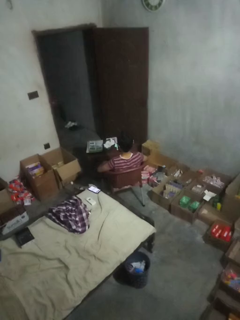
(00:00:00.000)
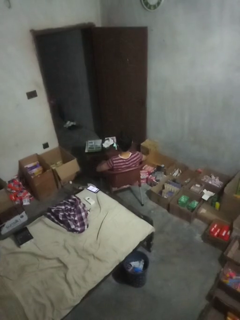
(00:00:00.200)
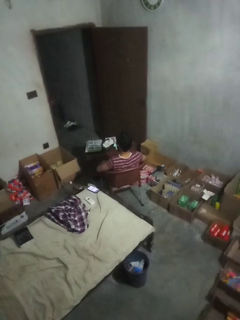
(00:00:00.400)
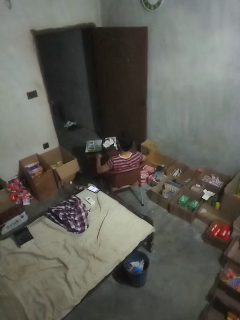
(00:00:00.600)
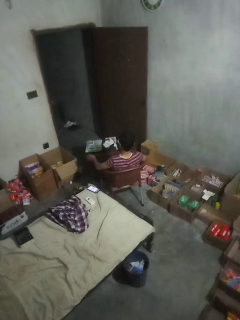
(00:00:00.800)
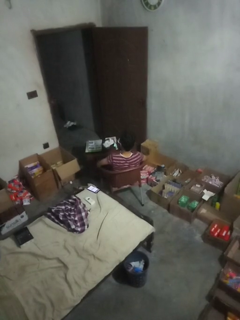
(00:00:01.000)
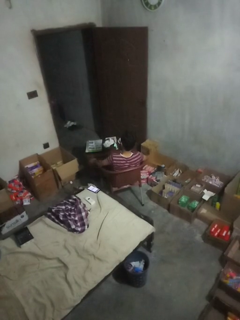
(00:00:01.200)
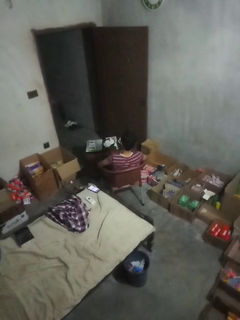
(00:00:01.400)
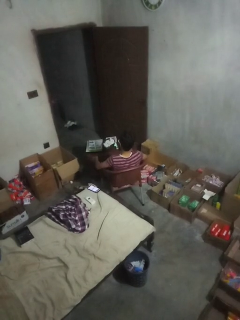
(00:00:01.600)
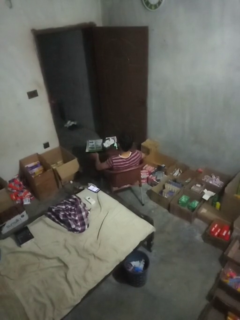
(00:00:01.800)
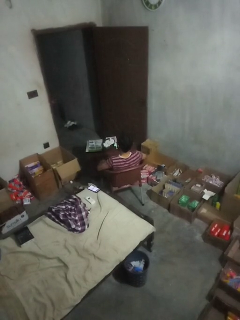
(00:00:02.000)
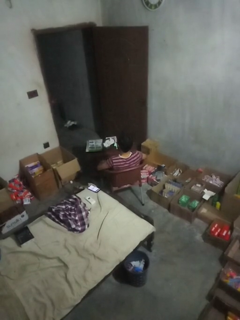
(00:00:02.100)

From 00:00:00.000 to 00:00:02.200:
person slaps hands on thighs

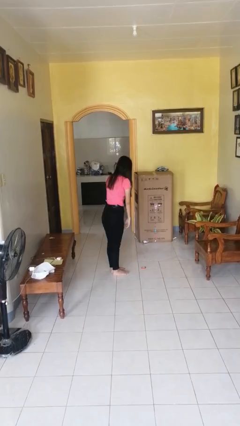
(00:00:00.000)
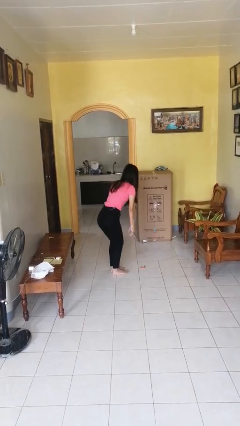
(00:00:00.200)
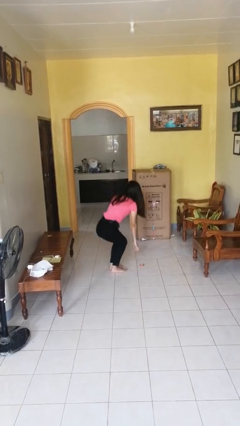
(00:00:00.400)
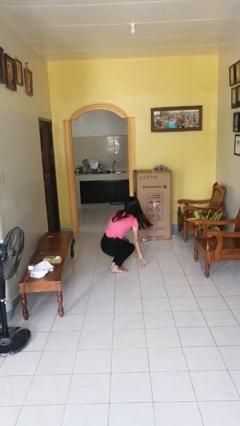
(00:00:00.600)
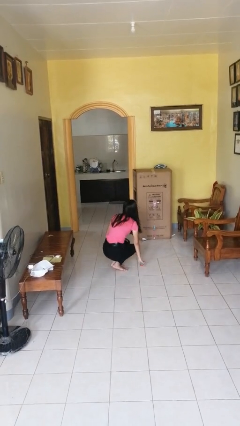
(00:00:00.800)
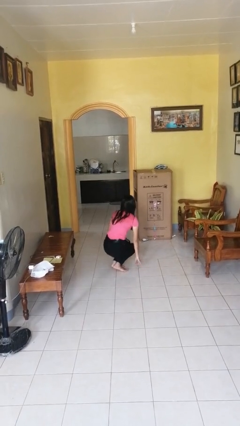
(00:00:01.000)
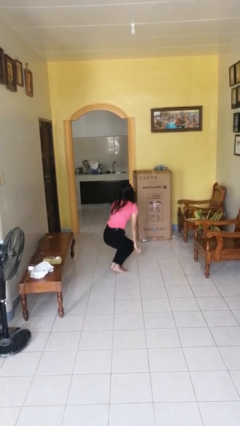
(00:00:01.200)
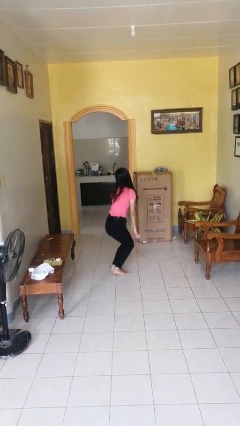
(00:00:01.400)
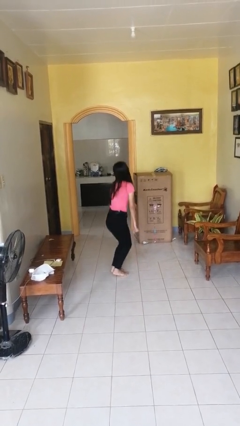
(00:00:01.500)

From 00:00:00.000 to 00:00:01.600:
person picks up object from floor

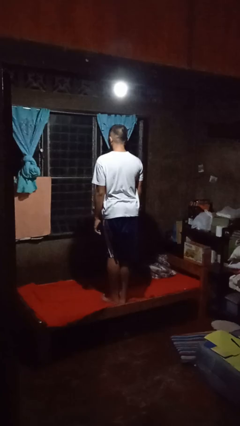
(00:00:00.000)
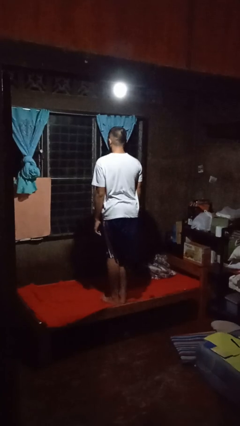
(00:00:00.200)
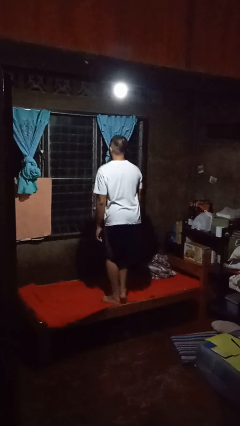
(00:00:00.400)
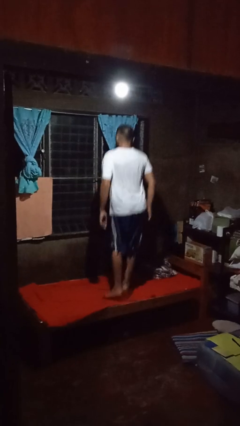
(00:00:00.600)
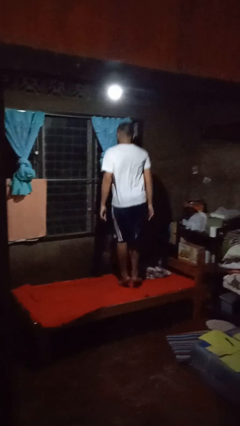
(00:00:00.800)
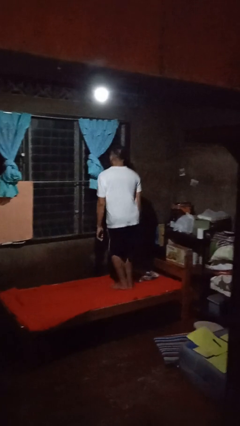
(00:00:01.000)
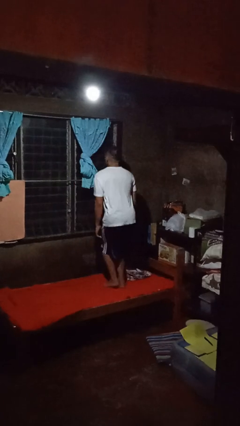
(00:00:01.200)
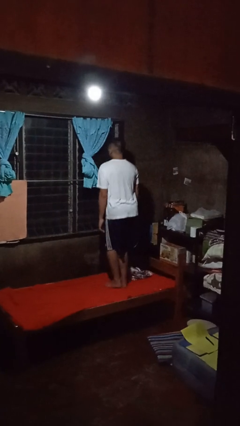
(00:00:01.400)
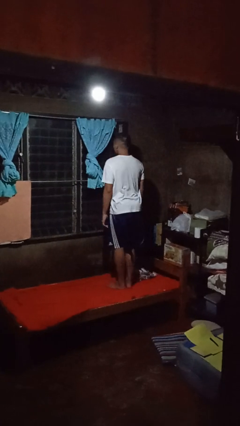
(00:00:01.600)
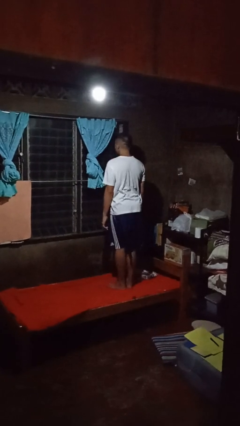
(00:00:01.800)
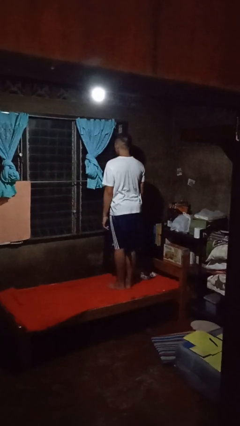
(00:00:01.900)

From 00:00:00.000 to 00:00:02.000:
person jumps on bed

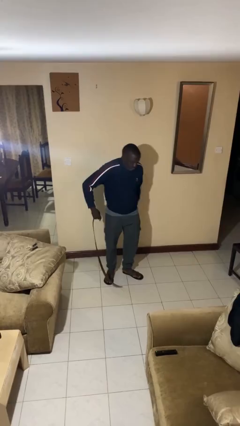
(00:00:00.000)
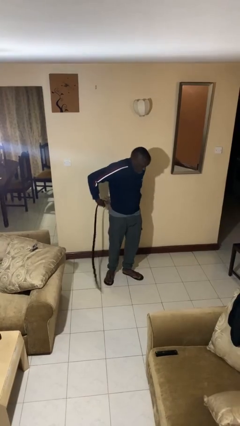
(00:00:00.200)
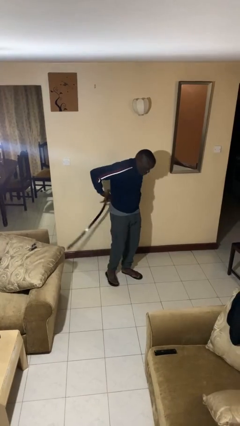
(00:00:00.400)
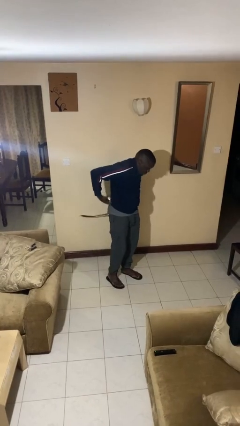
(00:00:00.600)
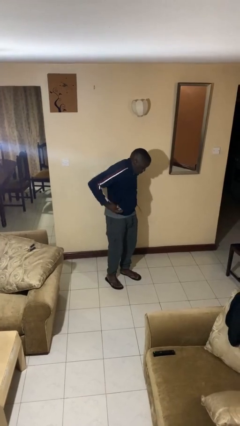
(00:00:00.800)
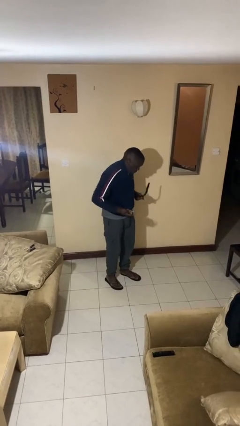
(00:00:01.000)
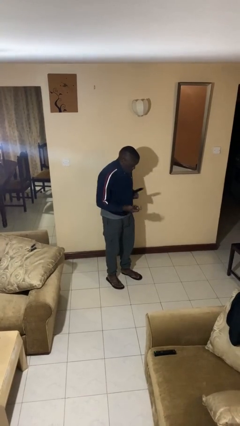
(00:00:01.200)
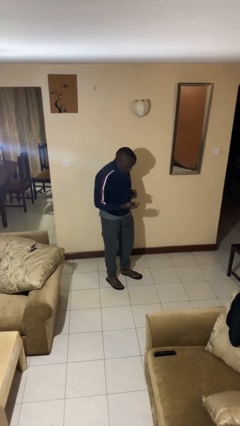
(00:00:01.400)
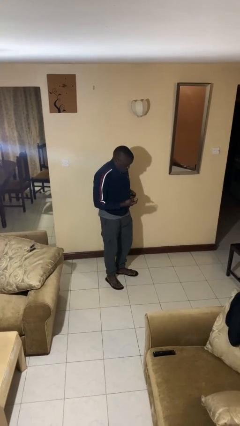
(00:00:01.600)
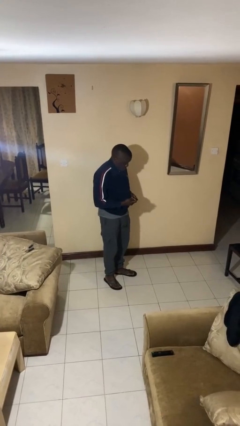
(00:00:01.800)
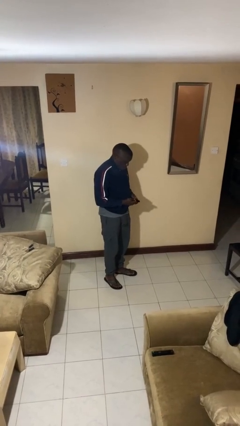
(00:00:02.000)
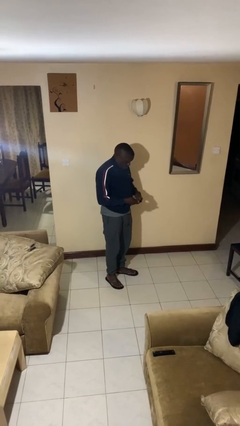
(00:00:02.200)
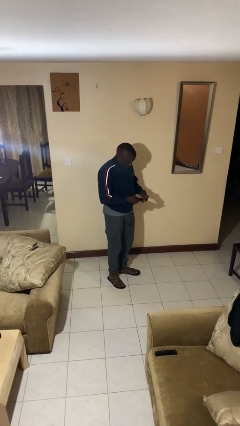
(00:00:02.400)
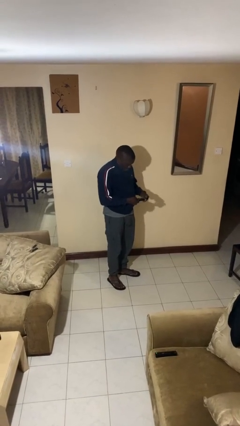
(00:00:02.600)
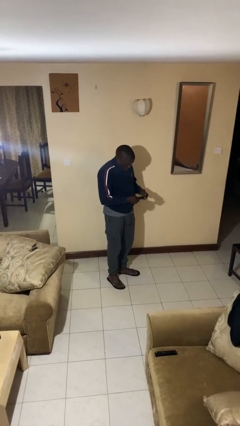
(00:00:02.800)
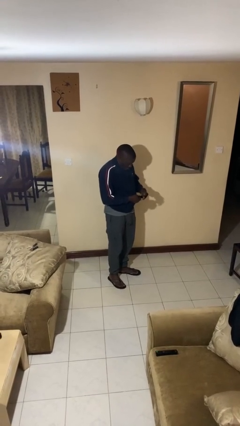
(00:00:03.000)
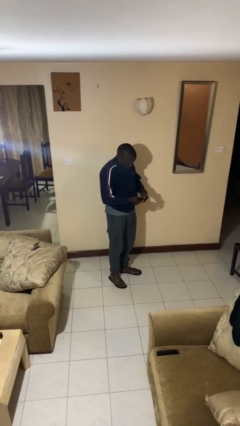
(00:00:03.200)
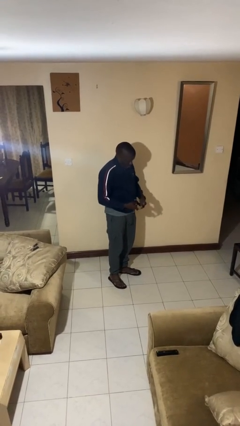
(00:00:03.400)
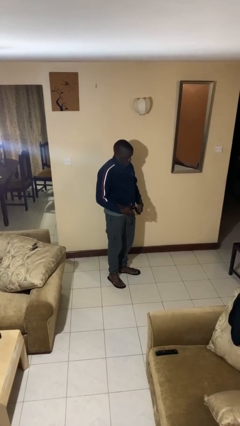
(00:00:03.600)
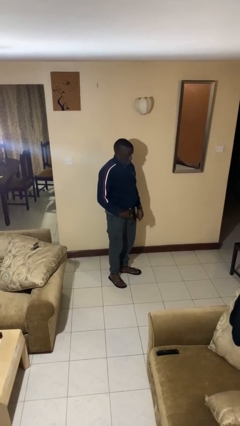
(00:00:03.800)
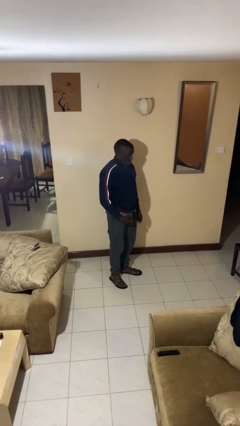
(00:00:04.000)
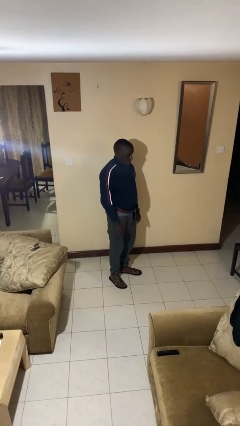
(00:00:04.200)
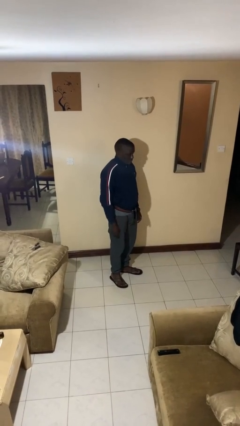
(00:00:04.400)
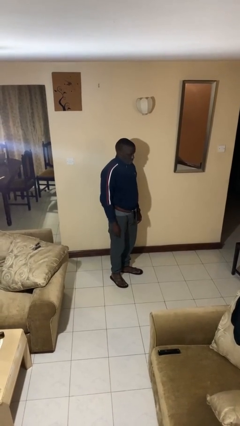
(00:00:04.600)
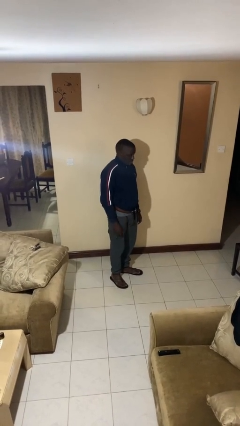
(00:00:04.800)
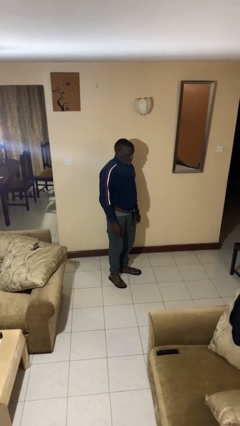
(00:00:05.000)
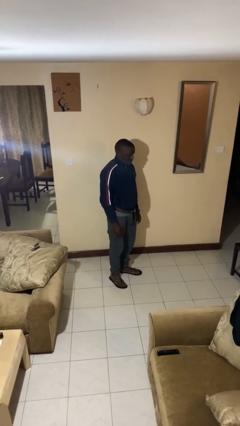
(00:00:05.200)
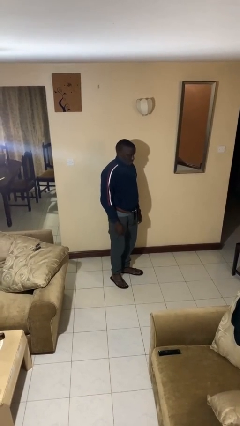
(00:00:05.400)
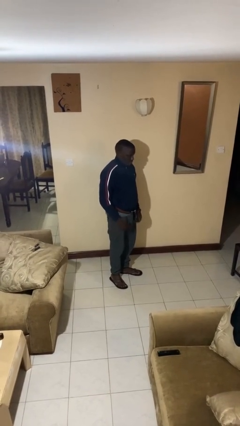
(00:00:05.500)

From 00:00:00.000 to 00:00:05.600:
person puts on belt

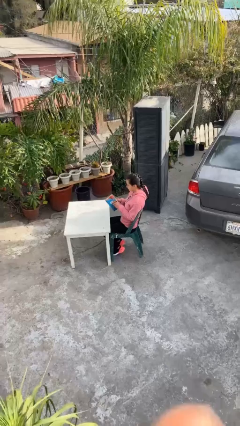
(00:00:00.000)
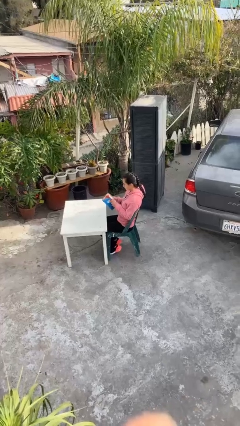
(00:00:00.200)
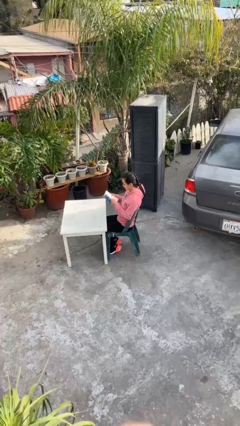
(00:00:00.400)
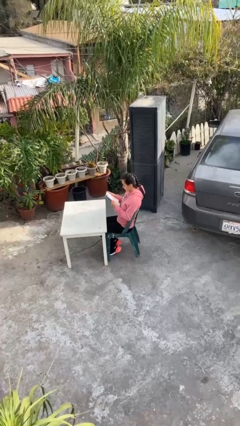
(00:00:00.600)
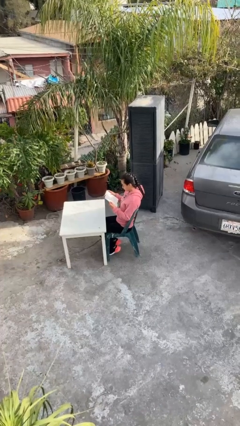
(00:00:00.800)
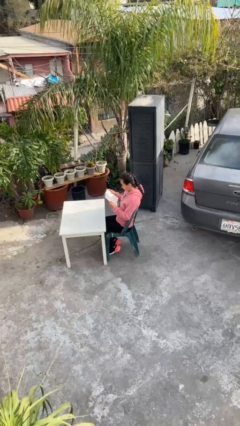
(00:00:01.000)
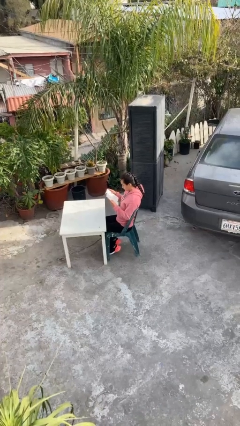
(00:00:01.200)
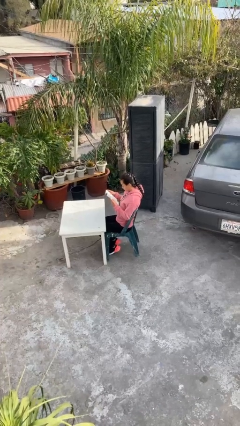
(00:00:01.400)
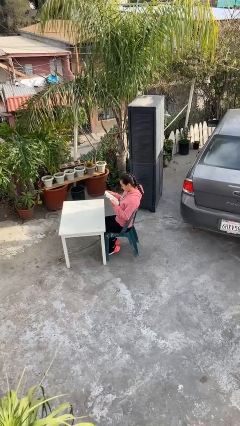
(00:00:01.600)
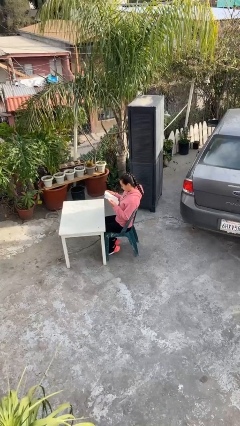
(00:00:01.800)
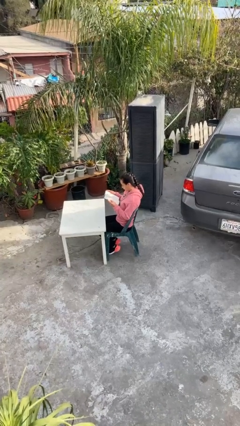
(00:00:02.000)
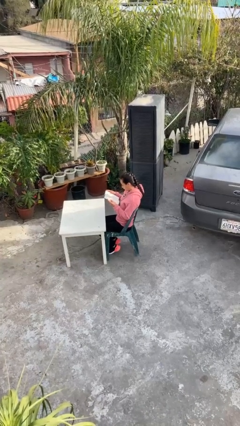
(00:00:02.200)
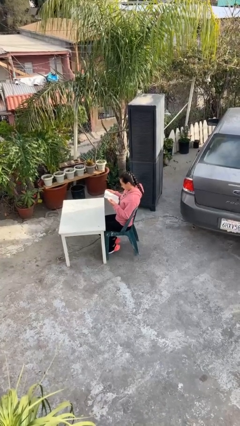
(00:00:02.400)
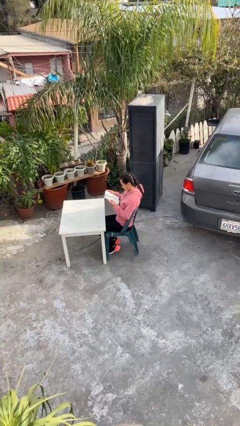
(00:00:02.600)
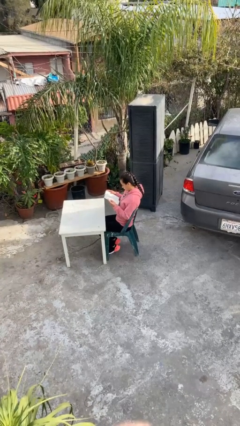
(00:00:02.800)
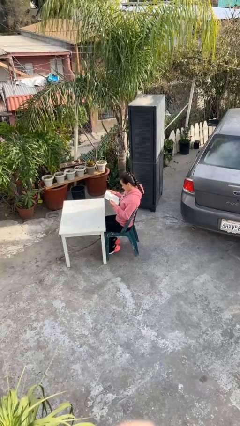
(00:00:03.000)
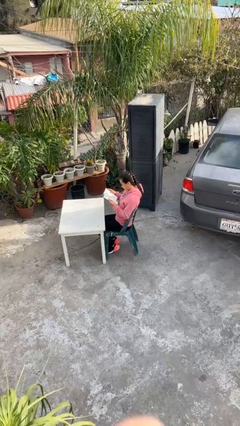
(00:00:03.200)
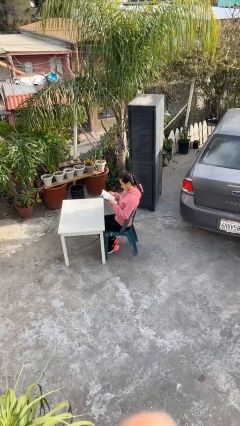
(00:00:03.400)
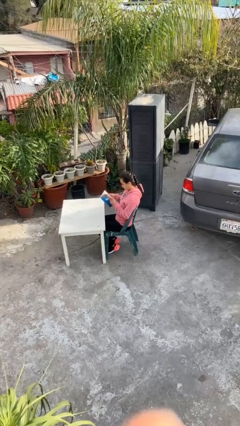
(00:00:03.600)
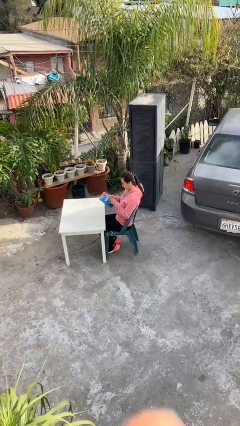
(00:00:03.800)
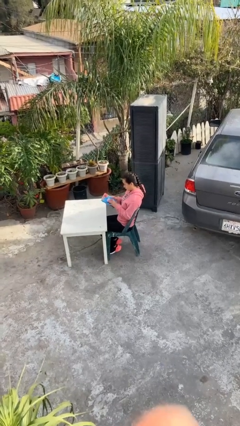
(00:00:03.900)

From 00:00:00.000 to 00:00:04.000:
person reads document

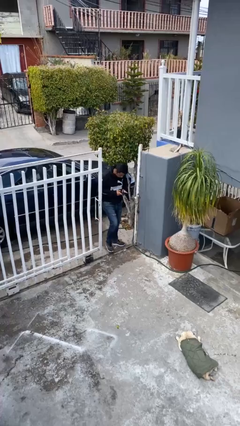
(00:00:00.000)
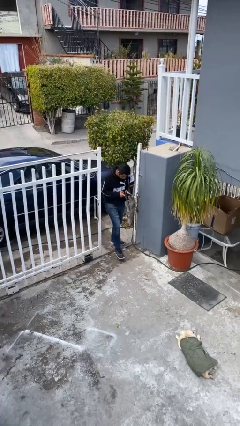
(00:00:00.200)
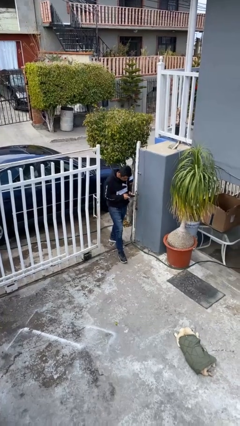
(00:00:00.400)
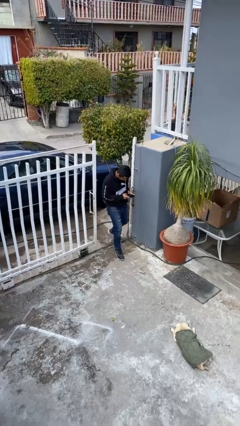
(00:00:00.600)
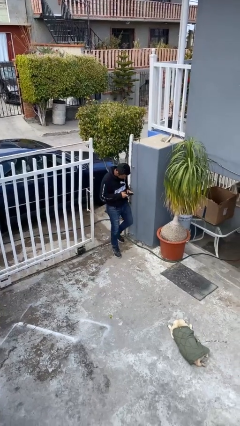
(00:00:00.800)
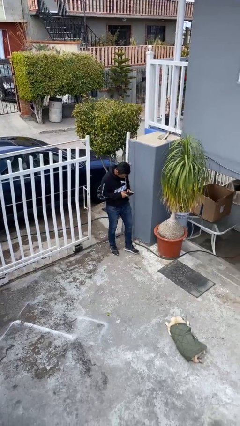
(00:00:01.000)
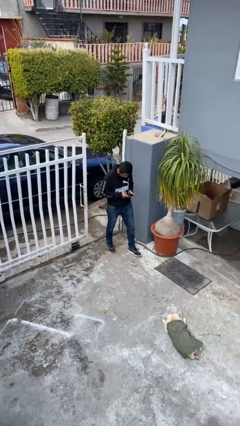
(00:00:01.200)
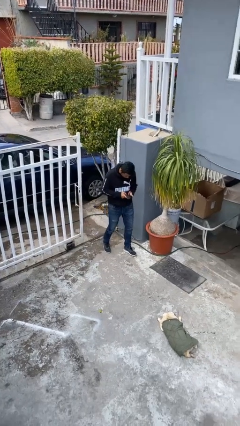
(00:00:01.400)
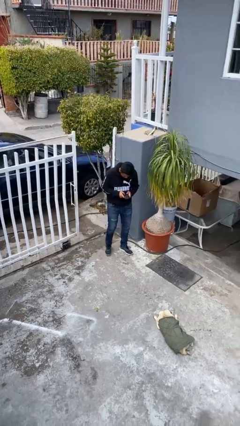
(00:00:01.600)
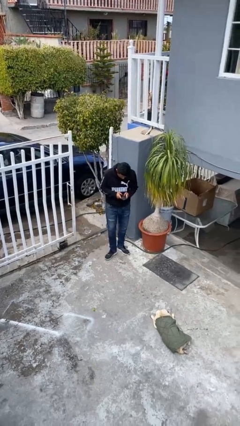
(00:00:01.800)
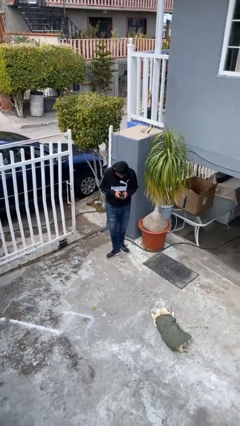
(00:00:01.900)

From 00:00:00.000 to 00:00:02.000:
person enters scene through structure

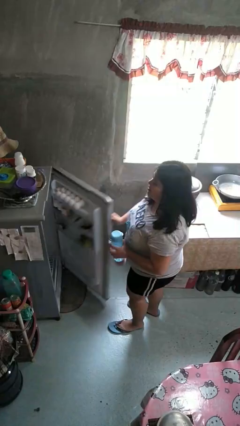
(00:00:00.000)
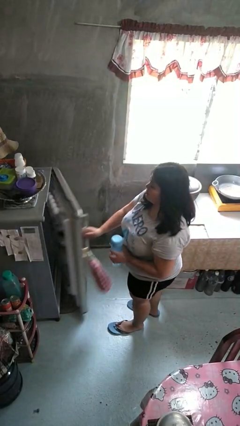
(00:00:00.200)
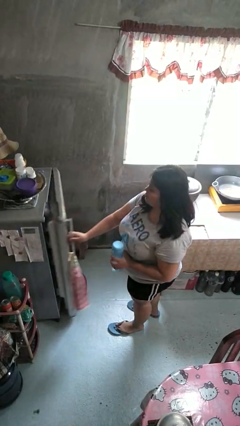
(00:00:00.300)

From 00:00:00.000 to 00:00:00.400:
person closes refrigerator
